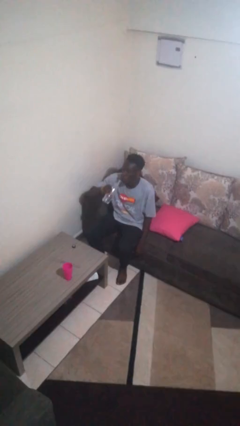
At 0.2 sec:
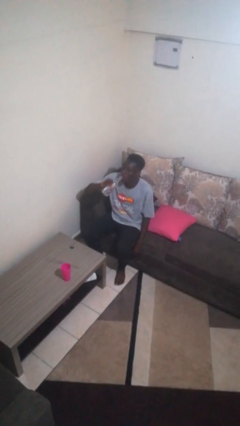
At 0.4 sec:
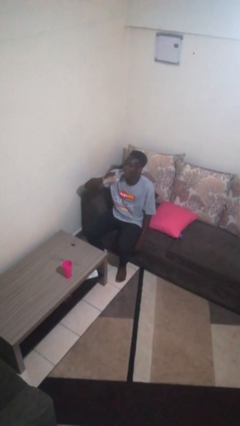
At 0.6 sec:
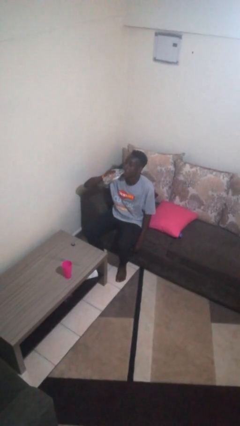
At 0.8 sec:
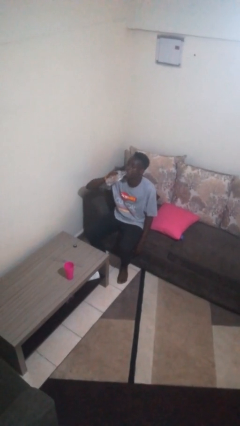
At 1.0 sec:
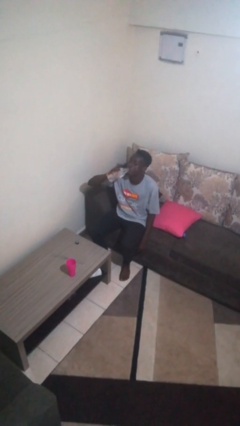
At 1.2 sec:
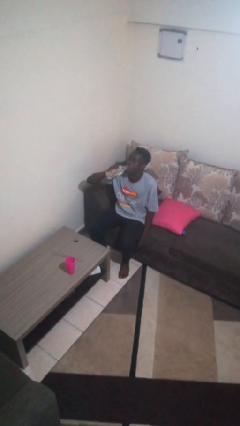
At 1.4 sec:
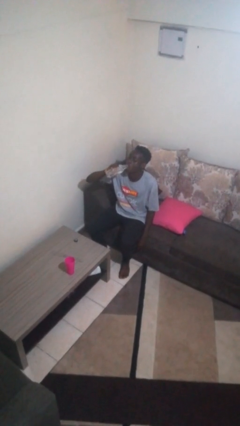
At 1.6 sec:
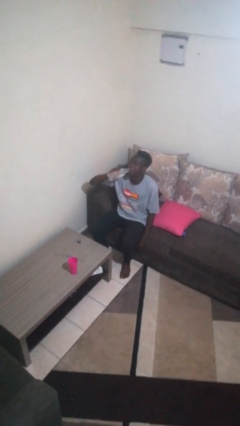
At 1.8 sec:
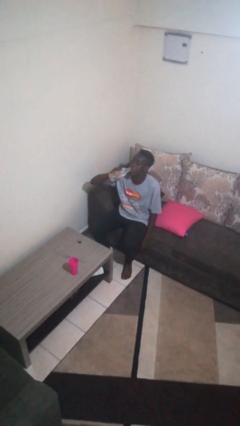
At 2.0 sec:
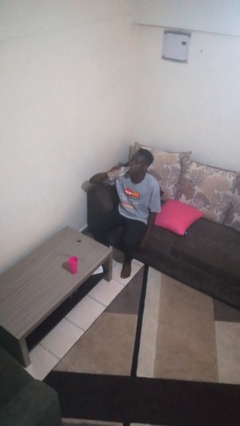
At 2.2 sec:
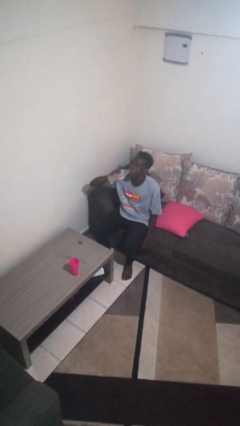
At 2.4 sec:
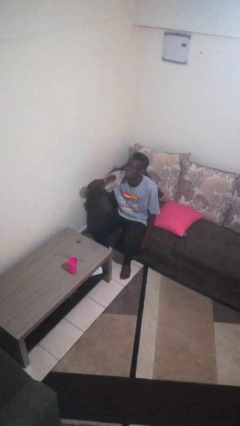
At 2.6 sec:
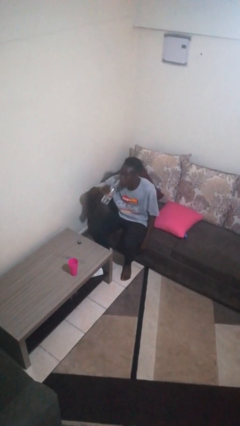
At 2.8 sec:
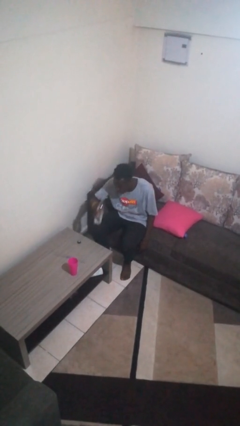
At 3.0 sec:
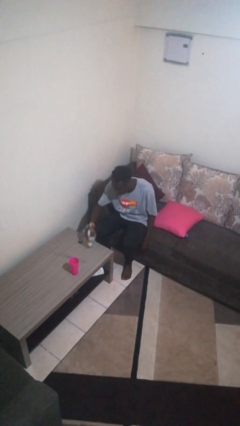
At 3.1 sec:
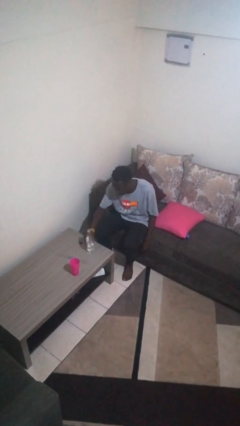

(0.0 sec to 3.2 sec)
person drinks from bottle

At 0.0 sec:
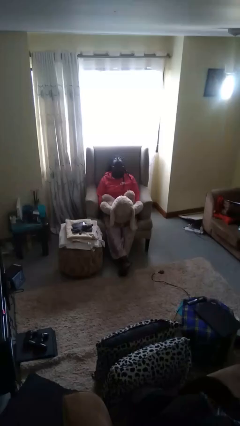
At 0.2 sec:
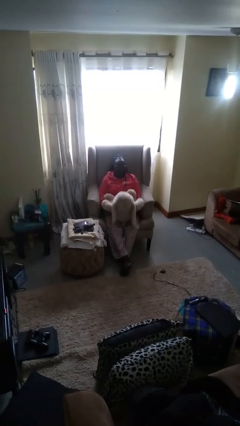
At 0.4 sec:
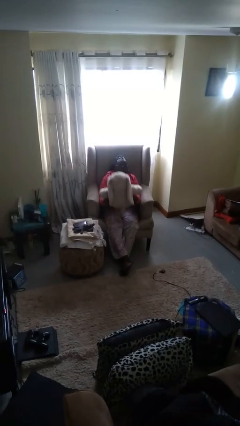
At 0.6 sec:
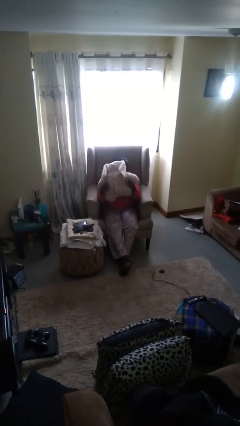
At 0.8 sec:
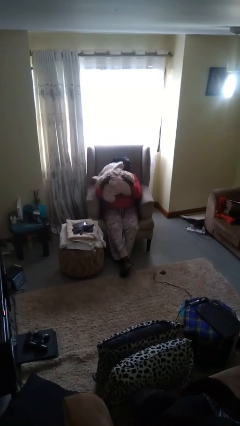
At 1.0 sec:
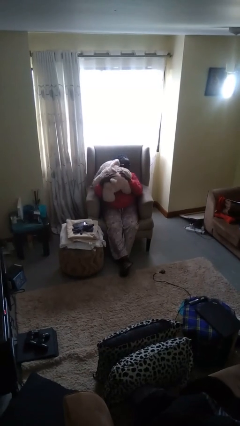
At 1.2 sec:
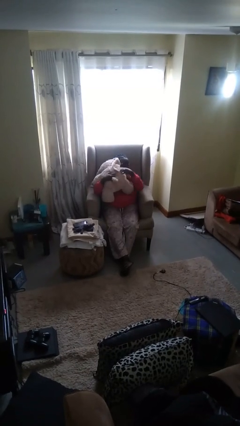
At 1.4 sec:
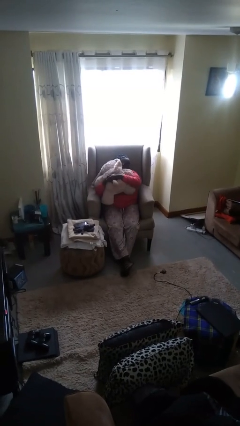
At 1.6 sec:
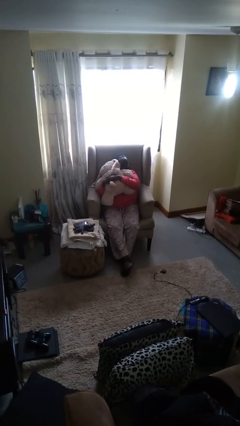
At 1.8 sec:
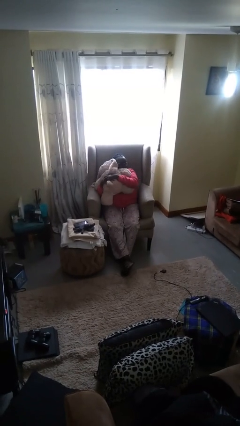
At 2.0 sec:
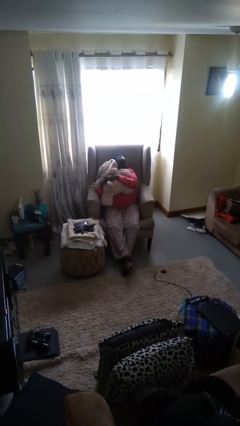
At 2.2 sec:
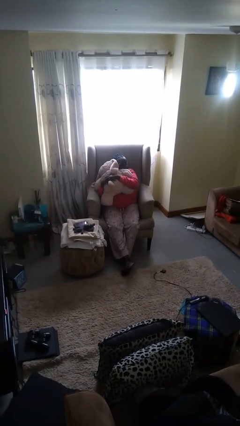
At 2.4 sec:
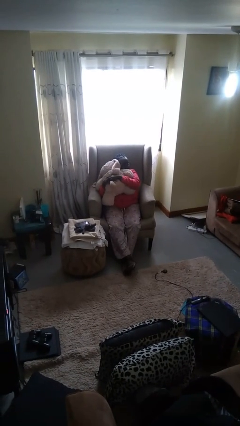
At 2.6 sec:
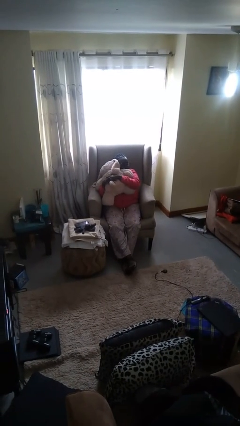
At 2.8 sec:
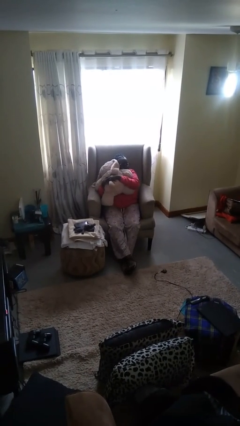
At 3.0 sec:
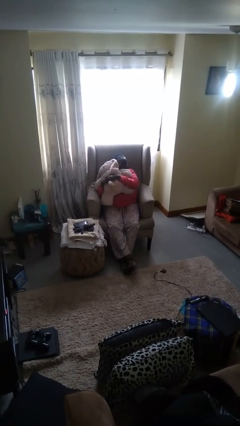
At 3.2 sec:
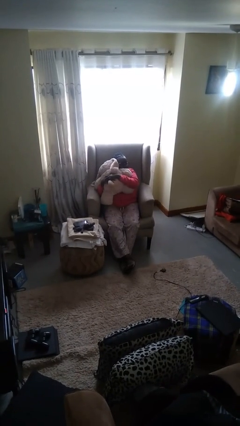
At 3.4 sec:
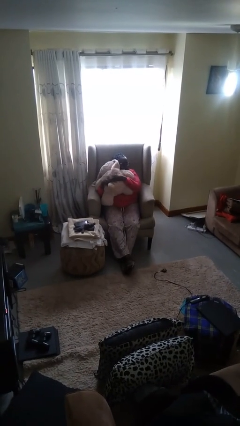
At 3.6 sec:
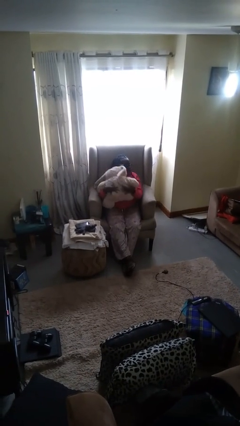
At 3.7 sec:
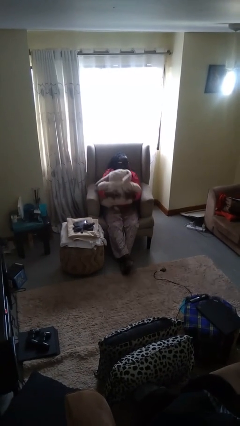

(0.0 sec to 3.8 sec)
person hugs stuffed animal

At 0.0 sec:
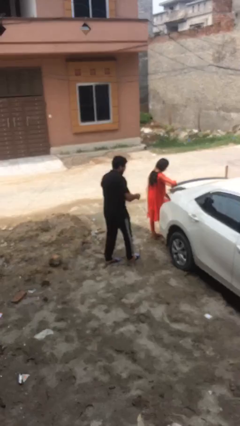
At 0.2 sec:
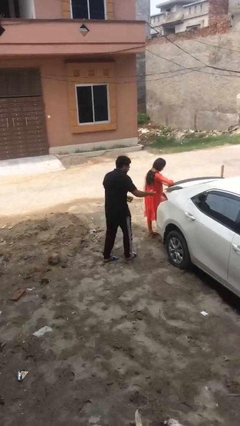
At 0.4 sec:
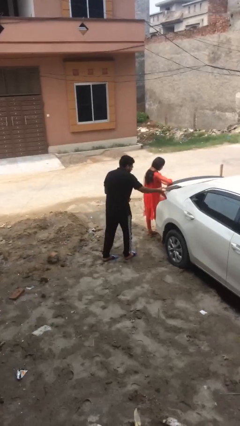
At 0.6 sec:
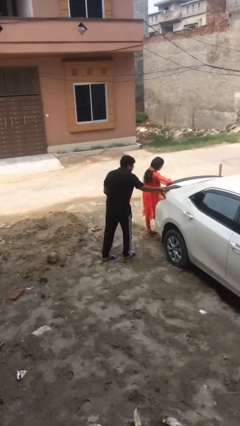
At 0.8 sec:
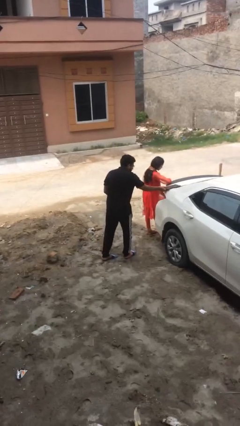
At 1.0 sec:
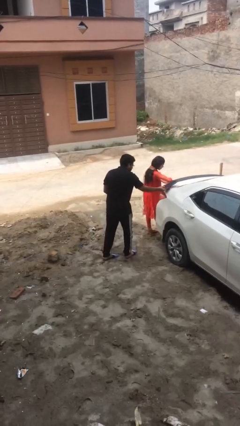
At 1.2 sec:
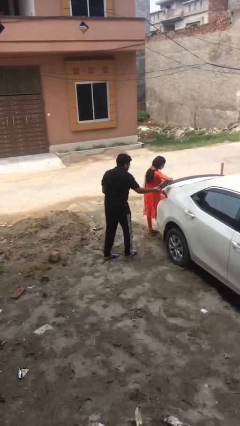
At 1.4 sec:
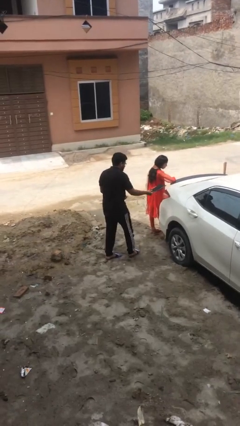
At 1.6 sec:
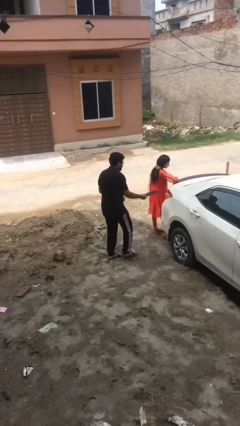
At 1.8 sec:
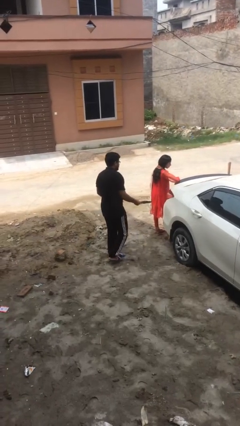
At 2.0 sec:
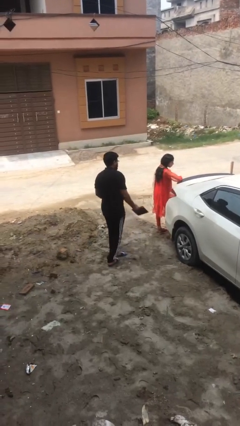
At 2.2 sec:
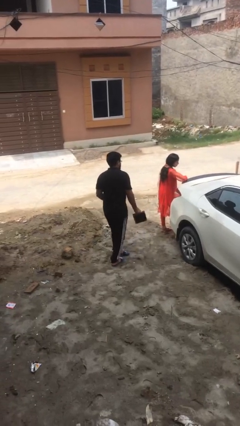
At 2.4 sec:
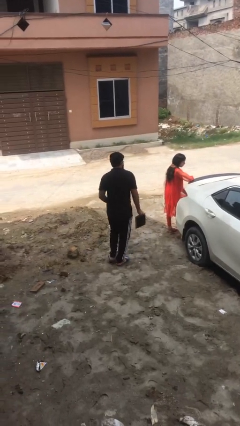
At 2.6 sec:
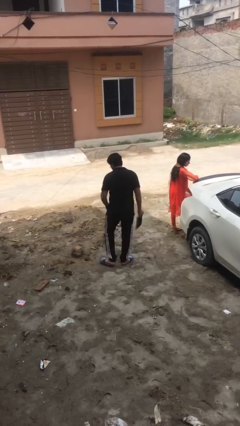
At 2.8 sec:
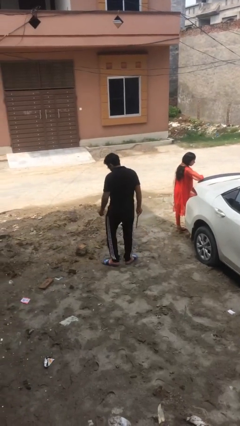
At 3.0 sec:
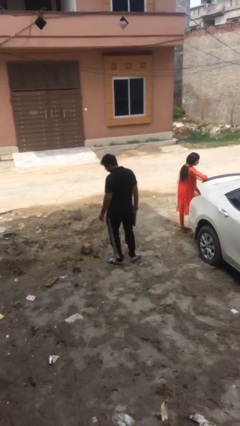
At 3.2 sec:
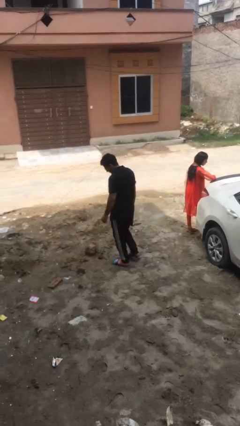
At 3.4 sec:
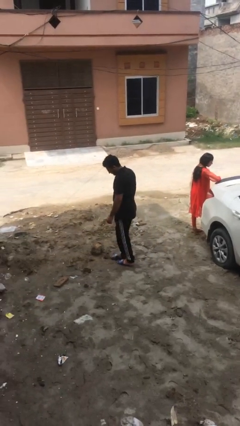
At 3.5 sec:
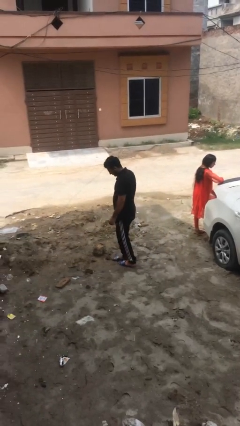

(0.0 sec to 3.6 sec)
person steals object from person

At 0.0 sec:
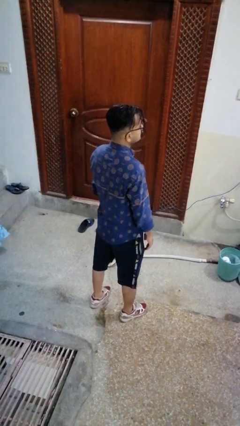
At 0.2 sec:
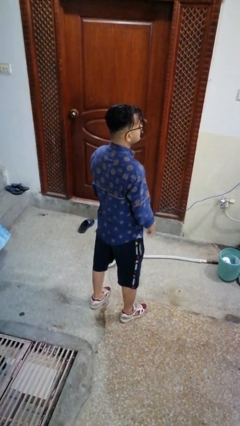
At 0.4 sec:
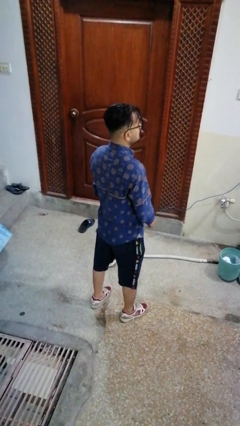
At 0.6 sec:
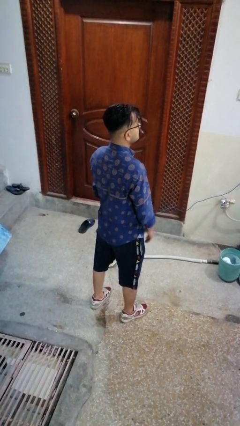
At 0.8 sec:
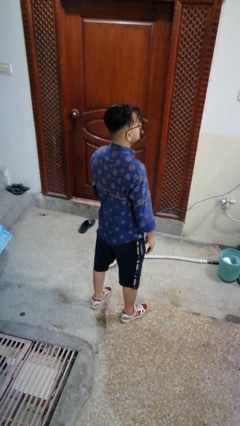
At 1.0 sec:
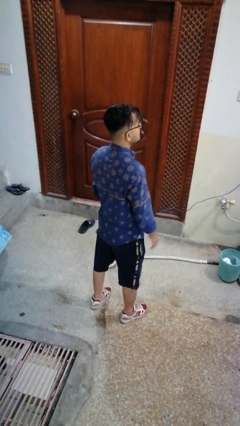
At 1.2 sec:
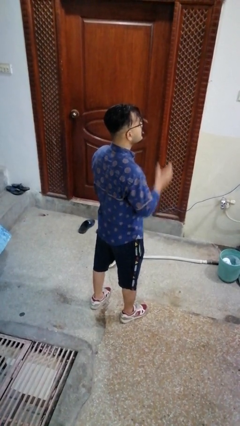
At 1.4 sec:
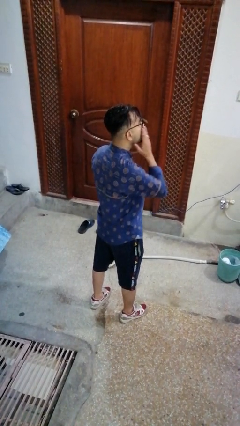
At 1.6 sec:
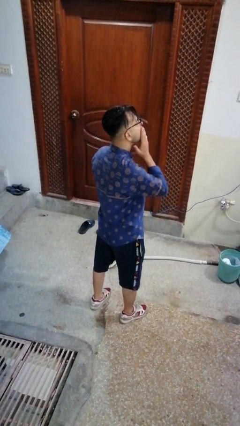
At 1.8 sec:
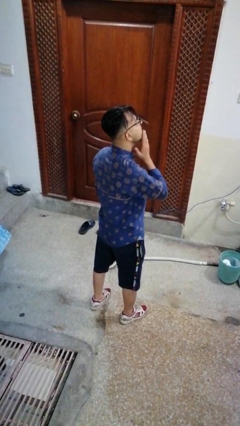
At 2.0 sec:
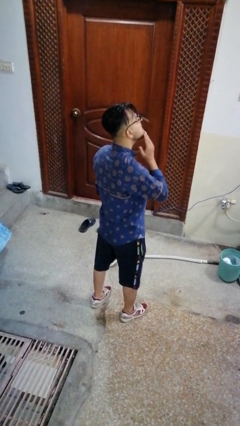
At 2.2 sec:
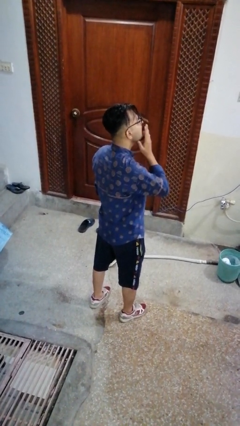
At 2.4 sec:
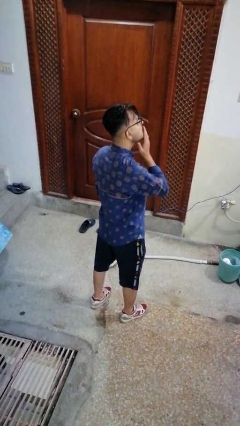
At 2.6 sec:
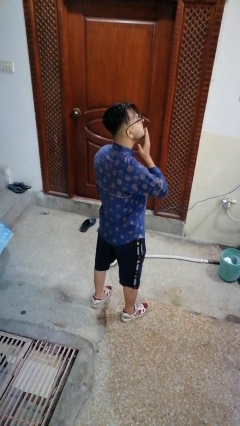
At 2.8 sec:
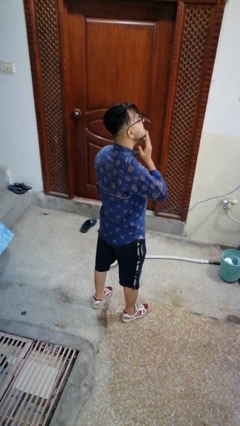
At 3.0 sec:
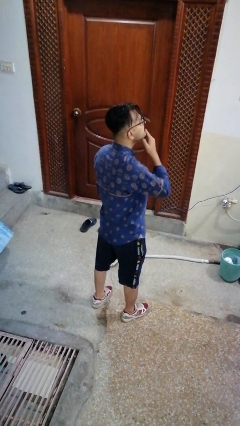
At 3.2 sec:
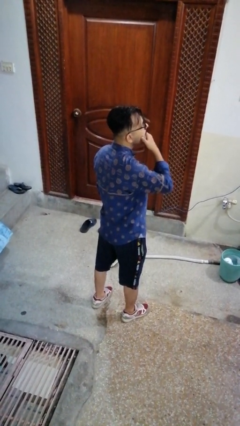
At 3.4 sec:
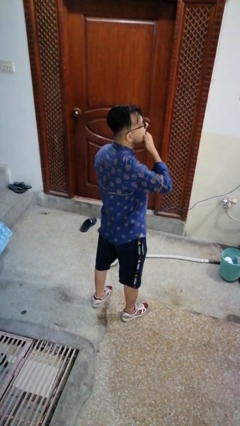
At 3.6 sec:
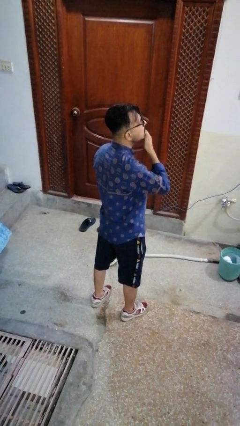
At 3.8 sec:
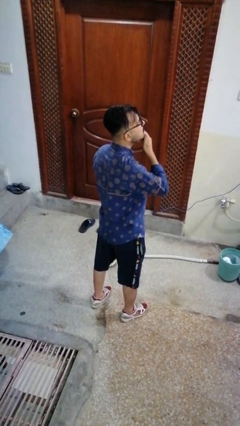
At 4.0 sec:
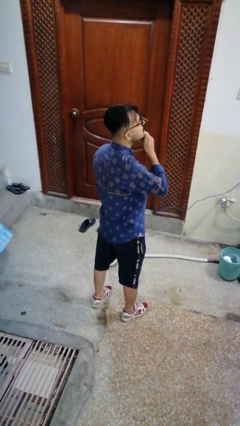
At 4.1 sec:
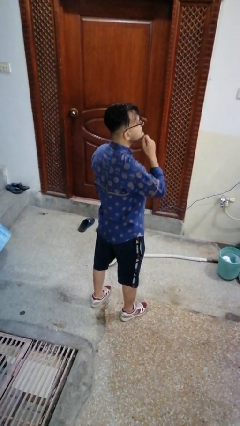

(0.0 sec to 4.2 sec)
person strokes chin

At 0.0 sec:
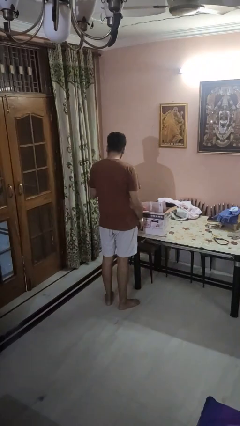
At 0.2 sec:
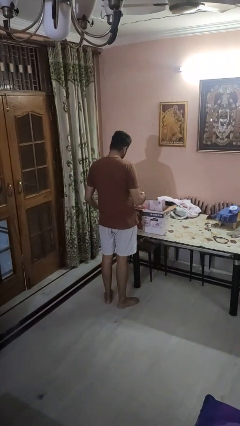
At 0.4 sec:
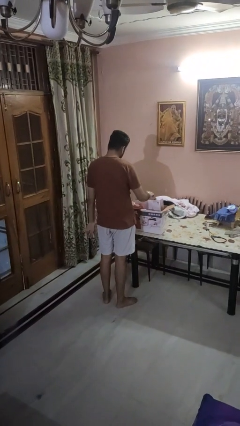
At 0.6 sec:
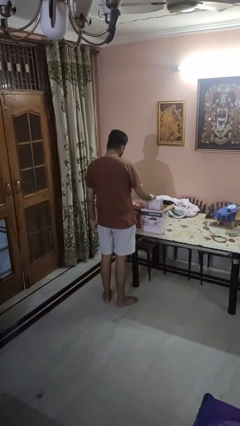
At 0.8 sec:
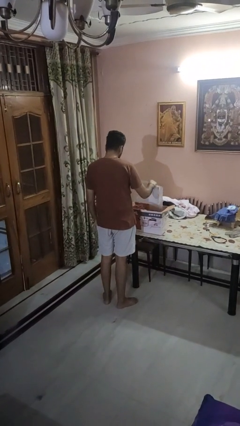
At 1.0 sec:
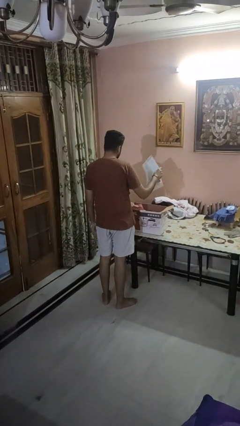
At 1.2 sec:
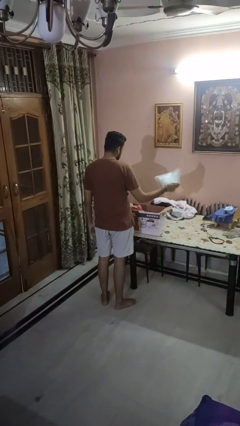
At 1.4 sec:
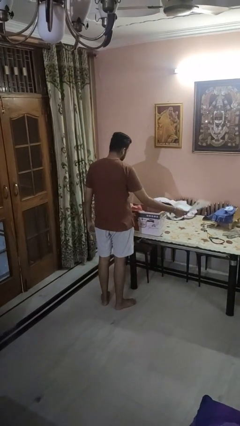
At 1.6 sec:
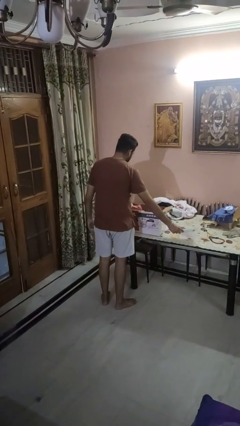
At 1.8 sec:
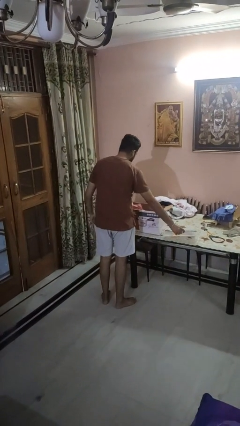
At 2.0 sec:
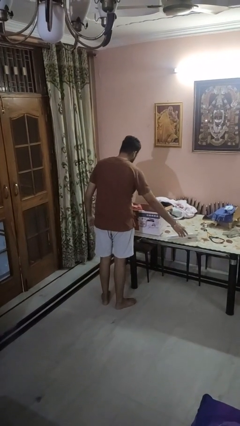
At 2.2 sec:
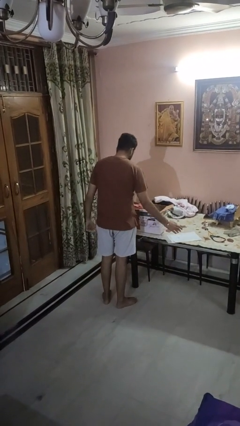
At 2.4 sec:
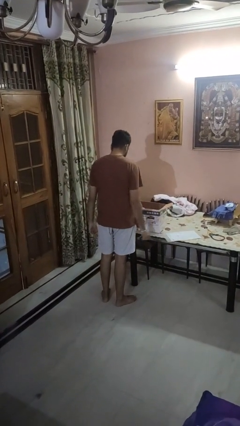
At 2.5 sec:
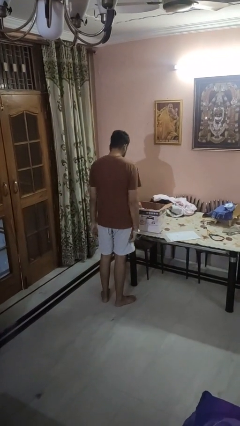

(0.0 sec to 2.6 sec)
person takes object from box
